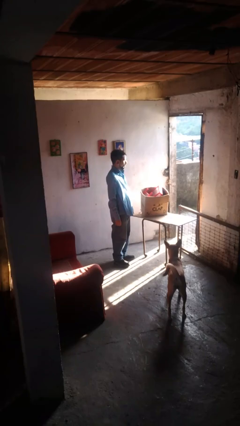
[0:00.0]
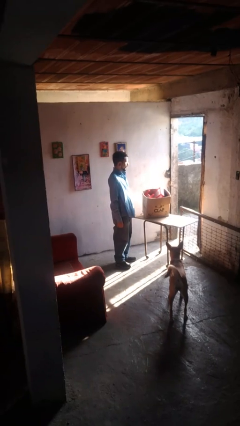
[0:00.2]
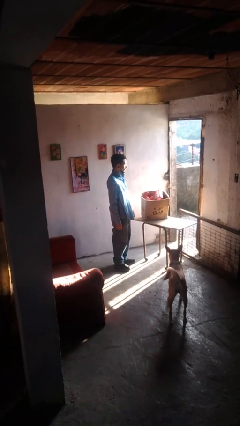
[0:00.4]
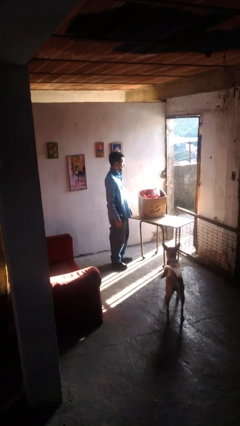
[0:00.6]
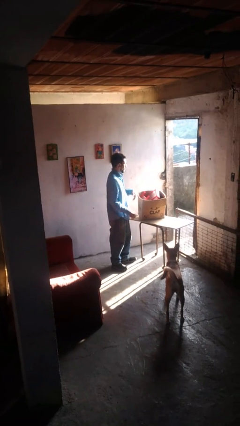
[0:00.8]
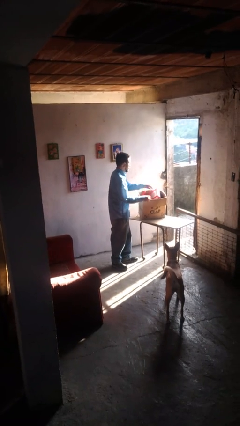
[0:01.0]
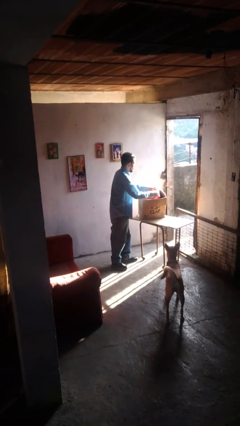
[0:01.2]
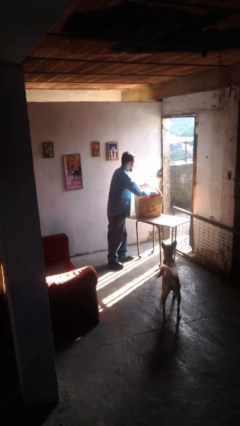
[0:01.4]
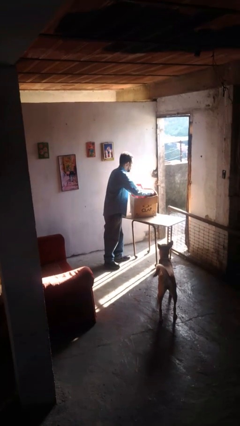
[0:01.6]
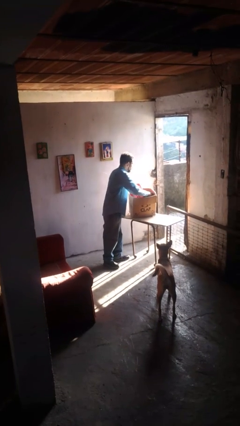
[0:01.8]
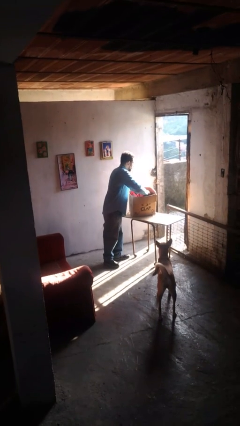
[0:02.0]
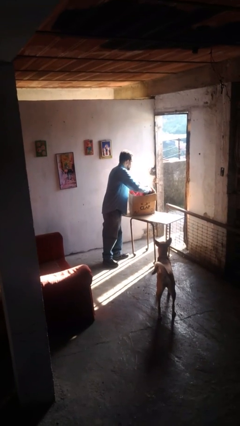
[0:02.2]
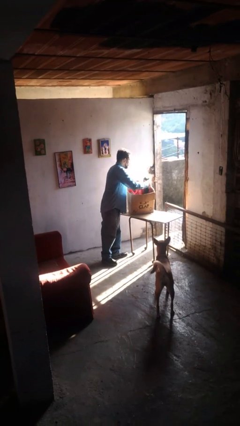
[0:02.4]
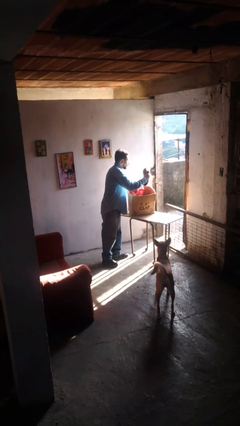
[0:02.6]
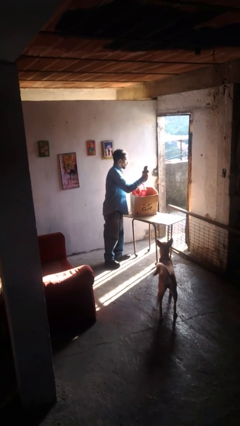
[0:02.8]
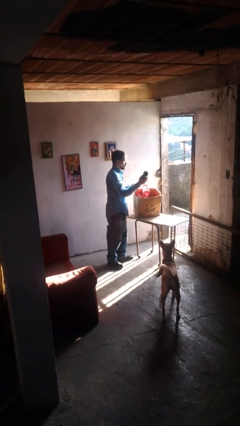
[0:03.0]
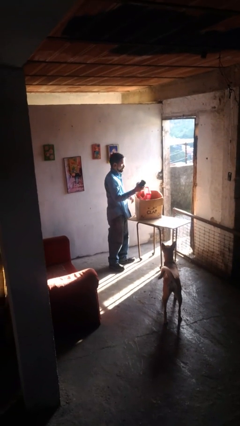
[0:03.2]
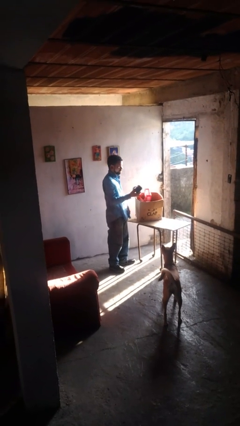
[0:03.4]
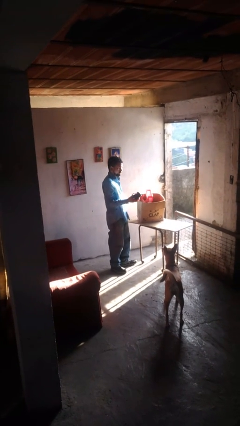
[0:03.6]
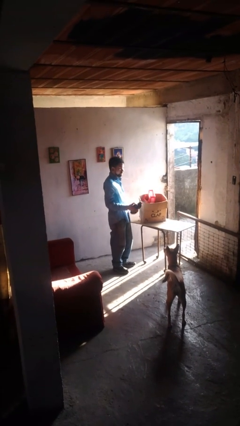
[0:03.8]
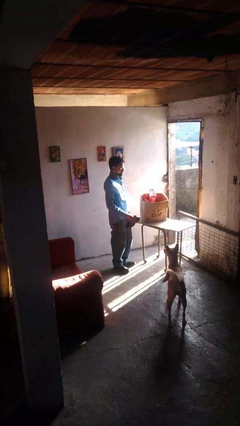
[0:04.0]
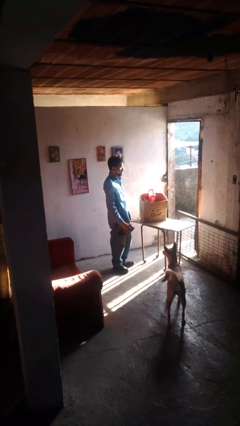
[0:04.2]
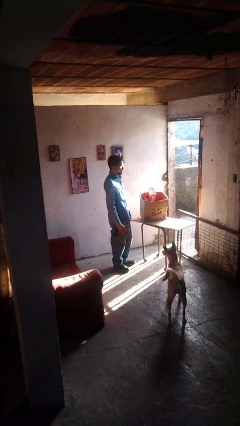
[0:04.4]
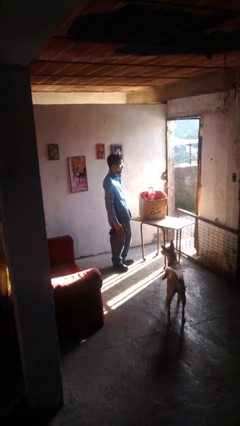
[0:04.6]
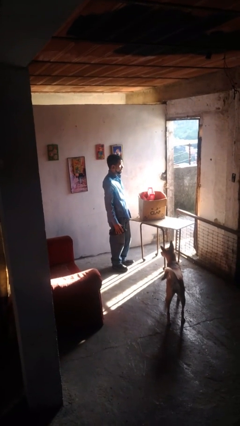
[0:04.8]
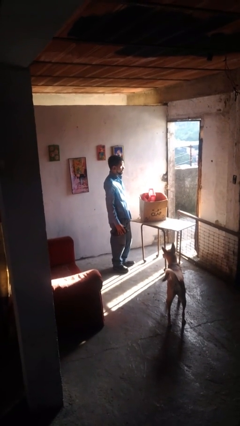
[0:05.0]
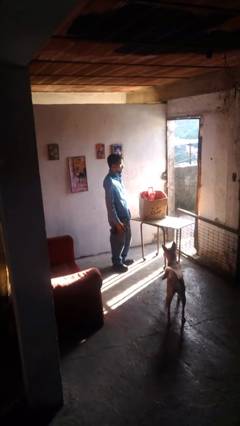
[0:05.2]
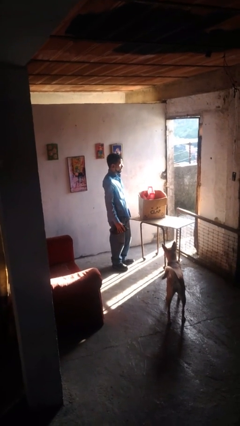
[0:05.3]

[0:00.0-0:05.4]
person takes object from box

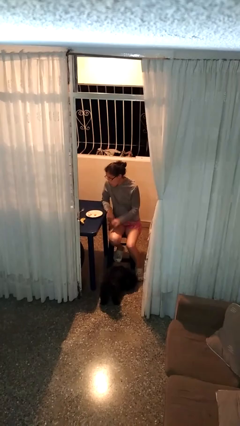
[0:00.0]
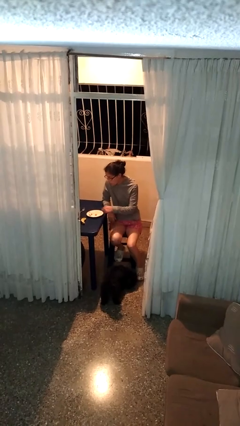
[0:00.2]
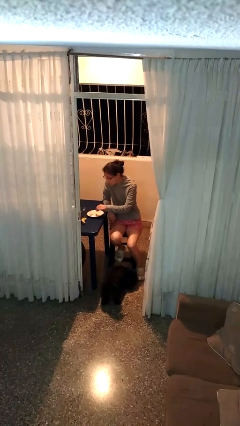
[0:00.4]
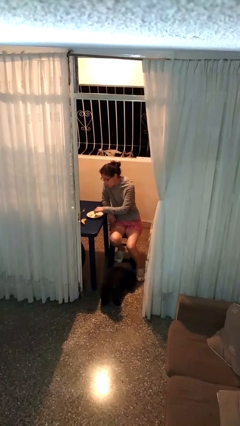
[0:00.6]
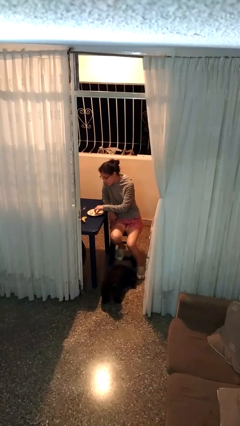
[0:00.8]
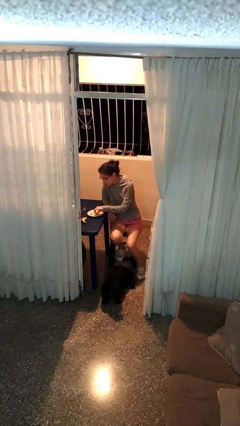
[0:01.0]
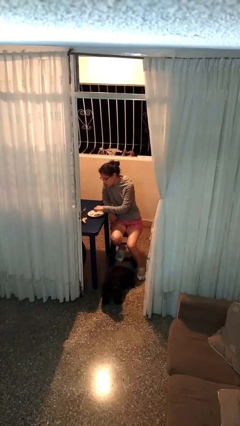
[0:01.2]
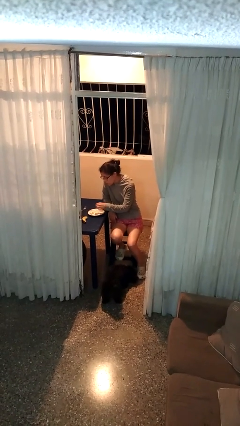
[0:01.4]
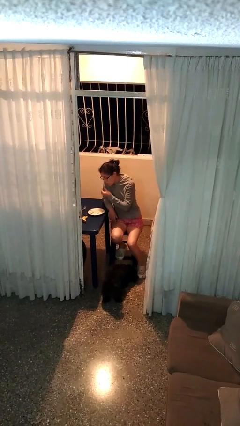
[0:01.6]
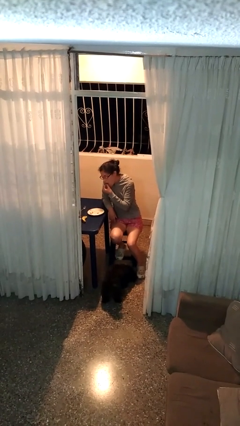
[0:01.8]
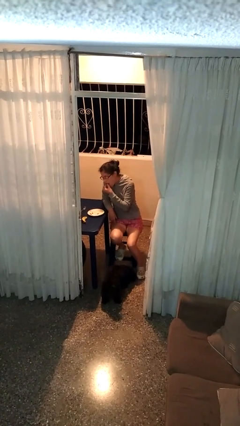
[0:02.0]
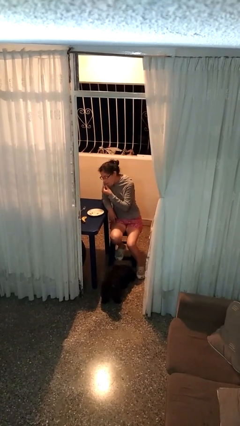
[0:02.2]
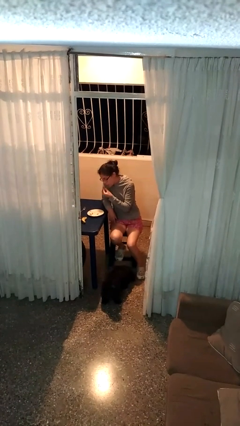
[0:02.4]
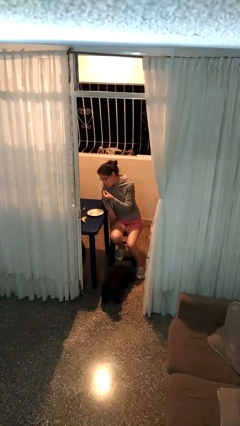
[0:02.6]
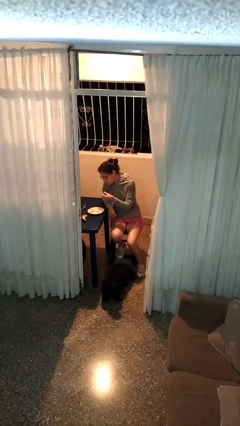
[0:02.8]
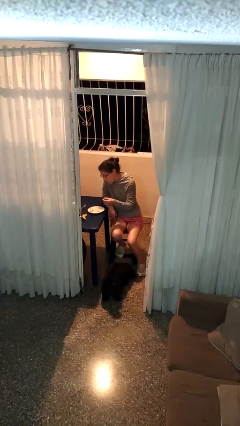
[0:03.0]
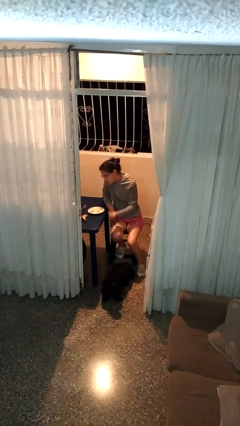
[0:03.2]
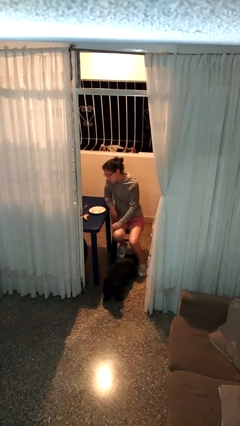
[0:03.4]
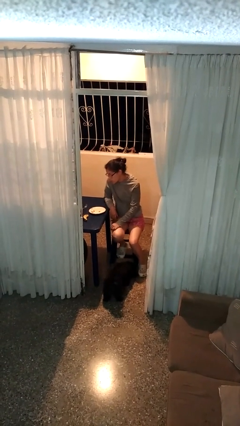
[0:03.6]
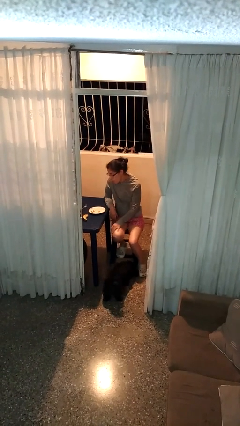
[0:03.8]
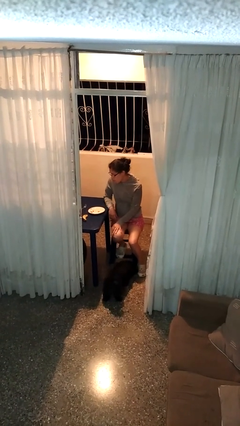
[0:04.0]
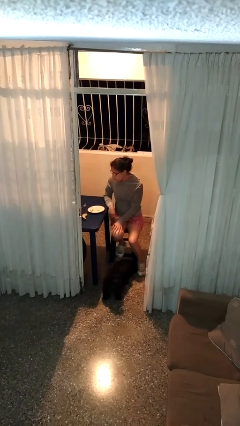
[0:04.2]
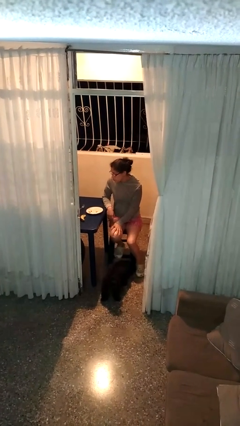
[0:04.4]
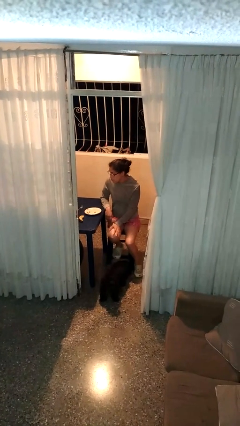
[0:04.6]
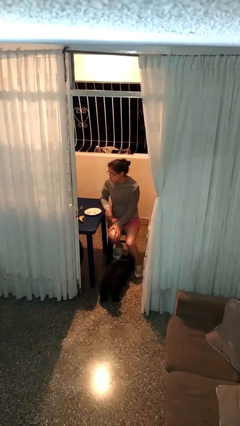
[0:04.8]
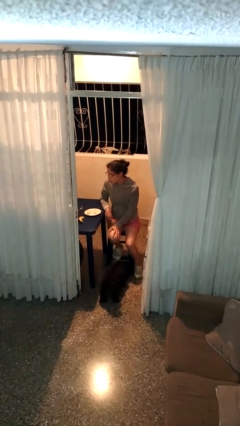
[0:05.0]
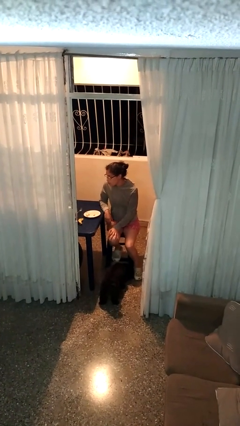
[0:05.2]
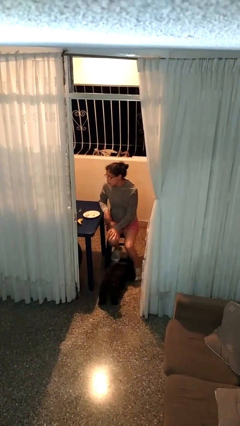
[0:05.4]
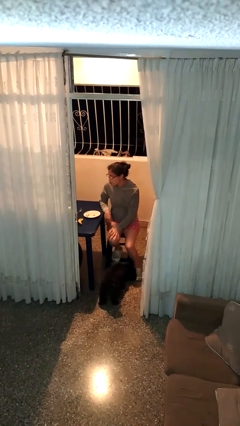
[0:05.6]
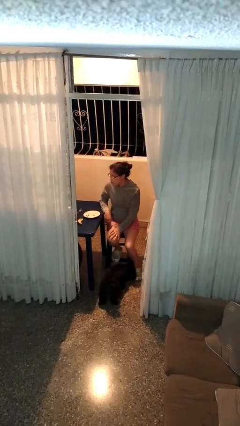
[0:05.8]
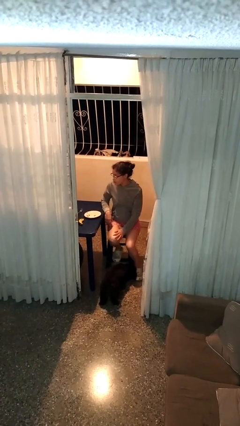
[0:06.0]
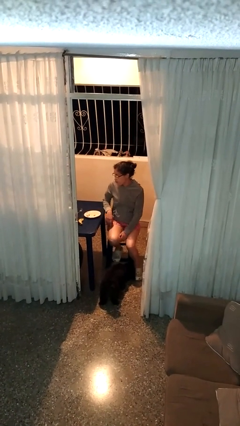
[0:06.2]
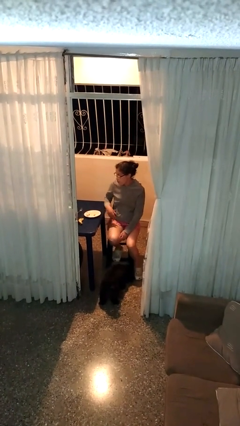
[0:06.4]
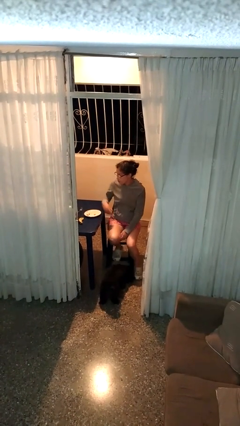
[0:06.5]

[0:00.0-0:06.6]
person eats with hands

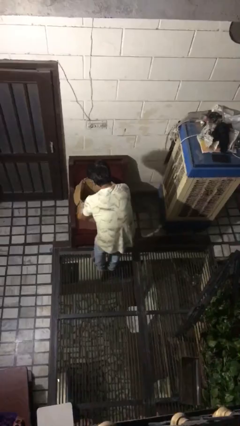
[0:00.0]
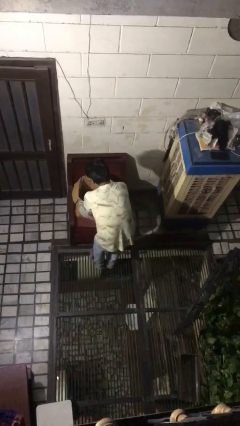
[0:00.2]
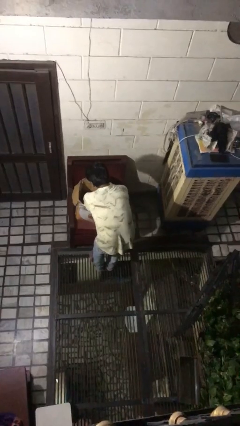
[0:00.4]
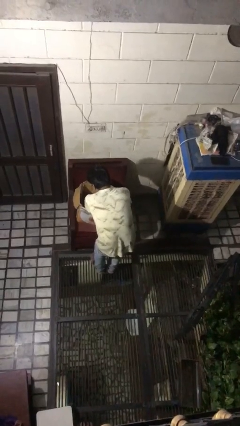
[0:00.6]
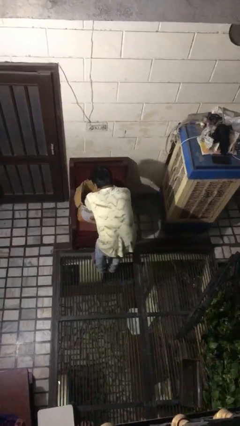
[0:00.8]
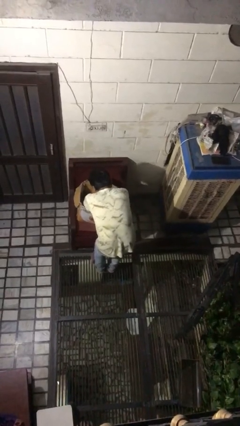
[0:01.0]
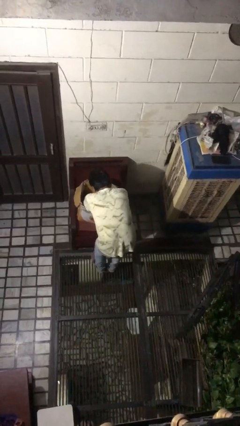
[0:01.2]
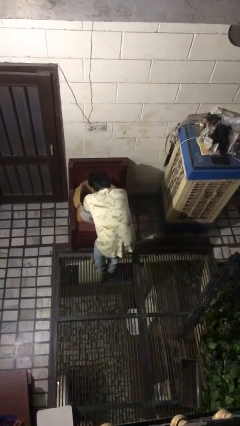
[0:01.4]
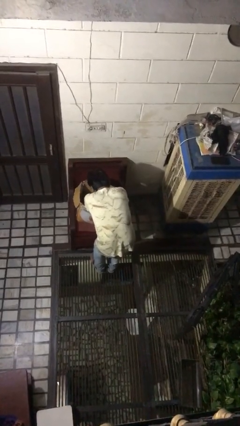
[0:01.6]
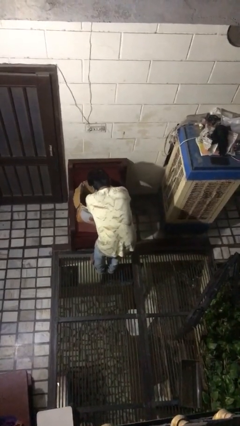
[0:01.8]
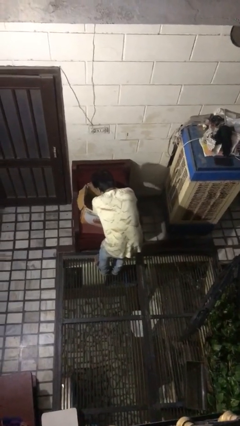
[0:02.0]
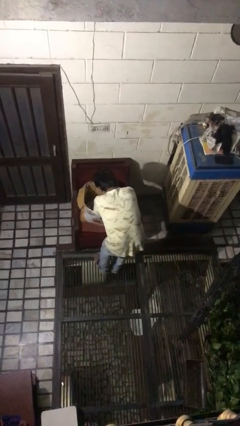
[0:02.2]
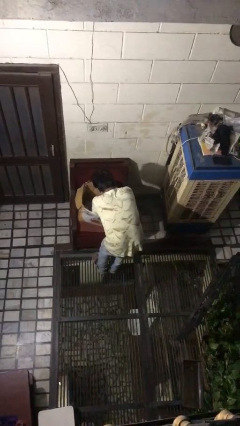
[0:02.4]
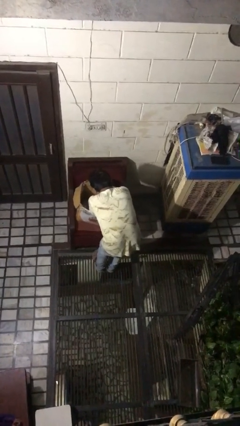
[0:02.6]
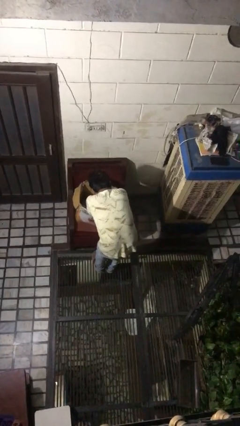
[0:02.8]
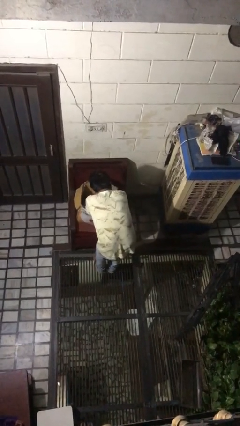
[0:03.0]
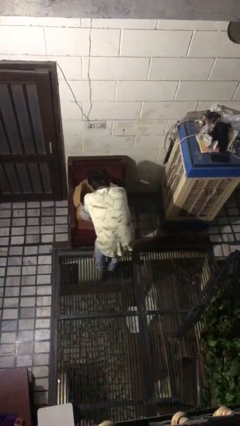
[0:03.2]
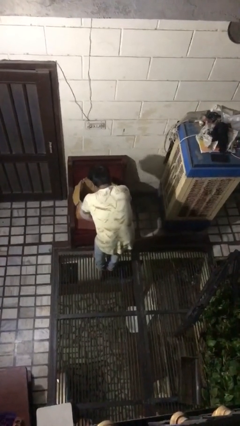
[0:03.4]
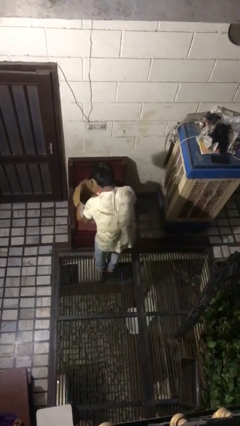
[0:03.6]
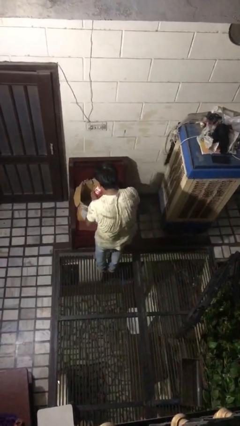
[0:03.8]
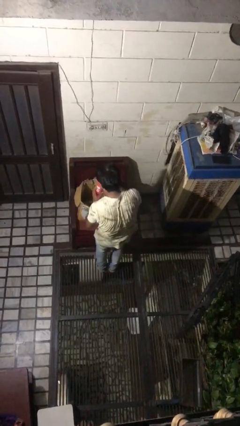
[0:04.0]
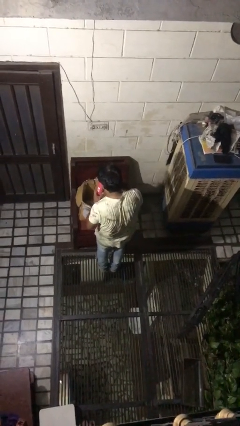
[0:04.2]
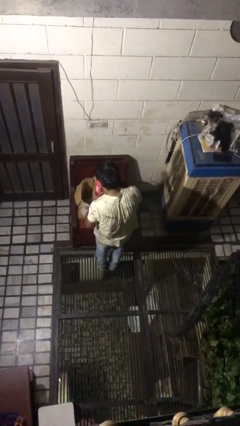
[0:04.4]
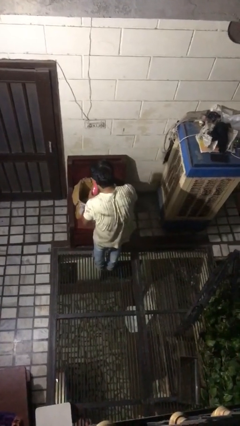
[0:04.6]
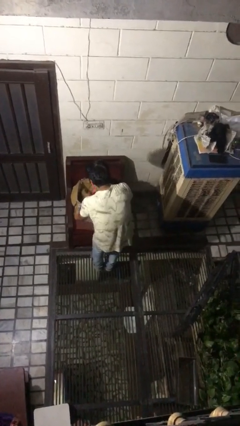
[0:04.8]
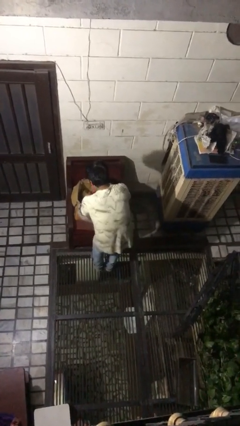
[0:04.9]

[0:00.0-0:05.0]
person searches in box

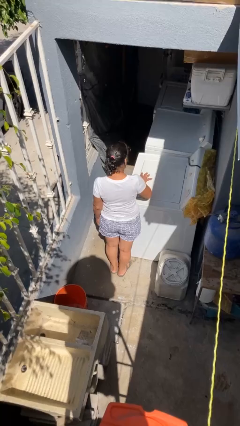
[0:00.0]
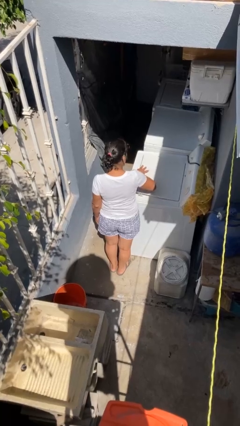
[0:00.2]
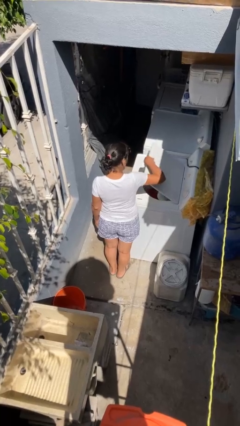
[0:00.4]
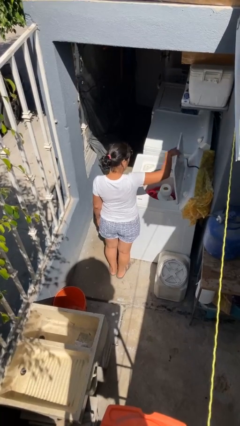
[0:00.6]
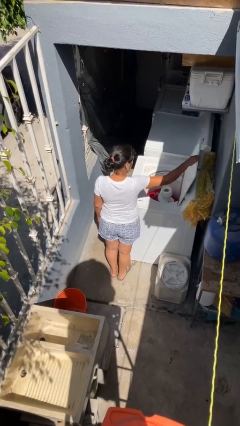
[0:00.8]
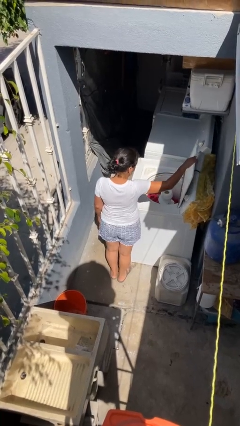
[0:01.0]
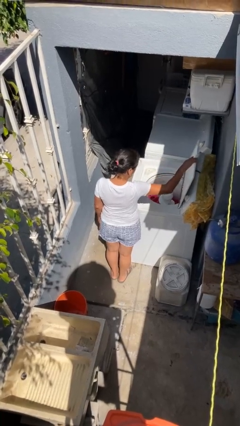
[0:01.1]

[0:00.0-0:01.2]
person opens clothes washer
